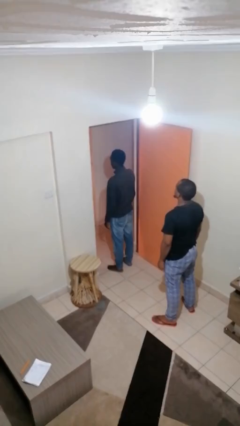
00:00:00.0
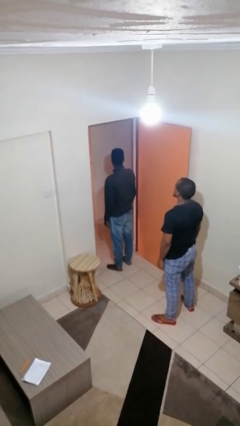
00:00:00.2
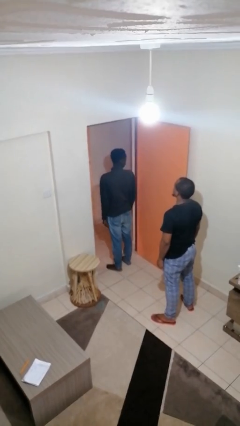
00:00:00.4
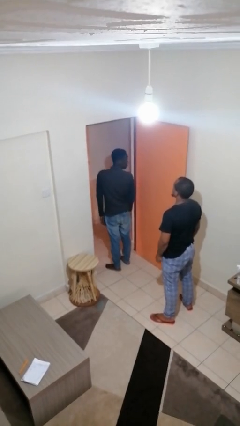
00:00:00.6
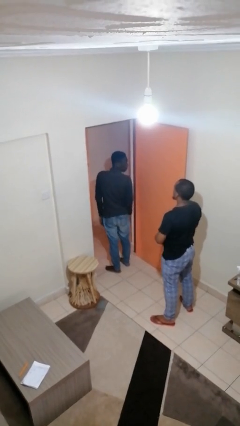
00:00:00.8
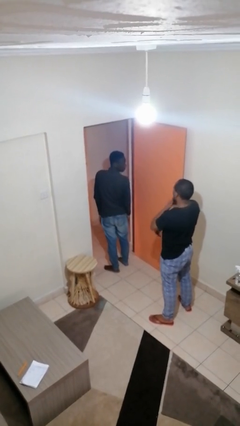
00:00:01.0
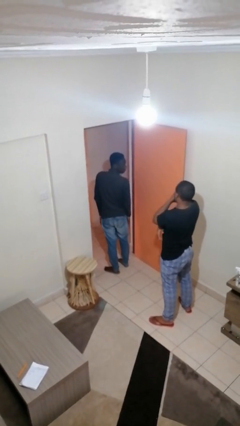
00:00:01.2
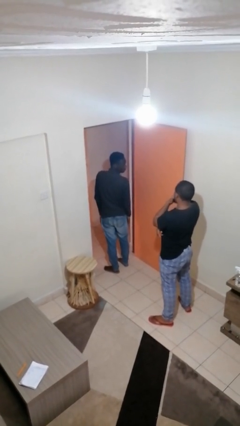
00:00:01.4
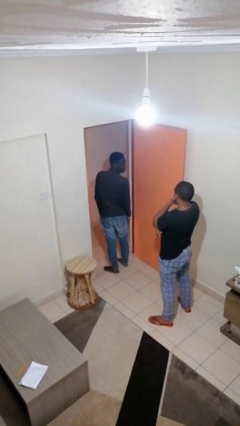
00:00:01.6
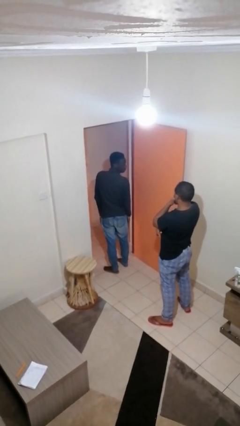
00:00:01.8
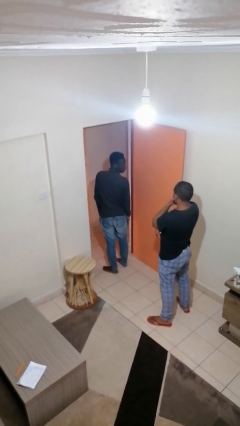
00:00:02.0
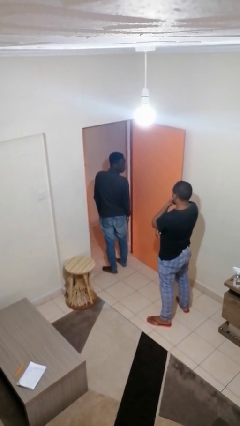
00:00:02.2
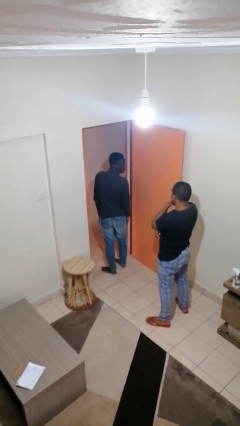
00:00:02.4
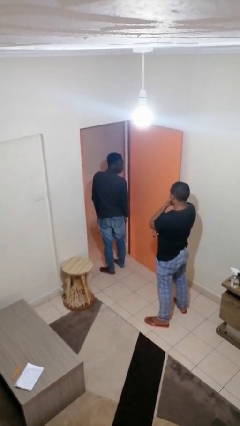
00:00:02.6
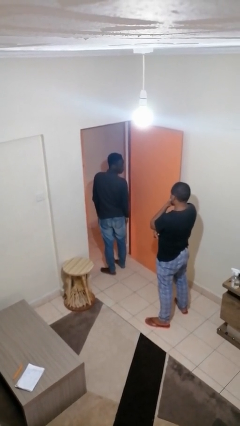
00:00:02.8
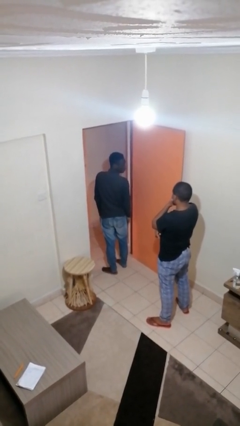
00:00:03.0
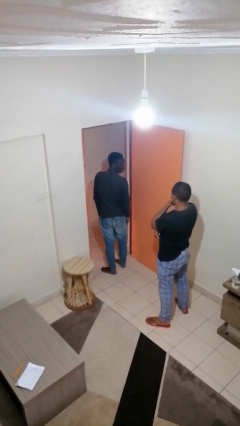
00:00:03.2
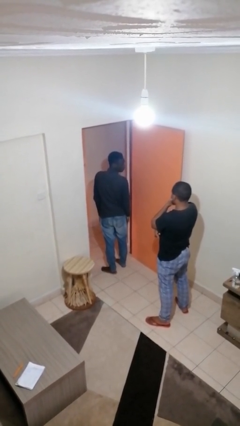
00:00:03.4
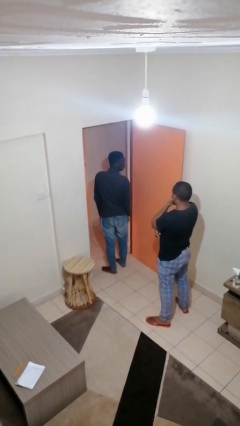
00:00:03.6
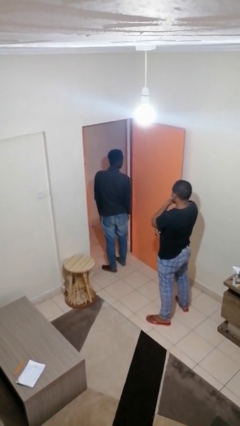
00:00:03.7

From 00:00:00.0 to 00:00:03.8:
person looks over shoulder

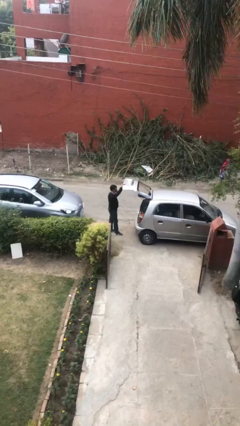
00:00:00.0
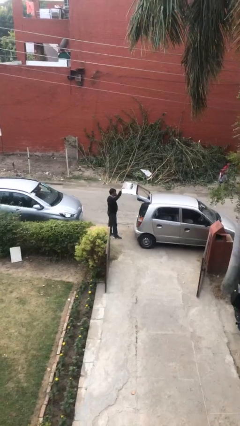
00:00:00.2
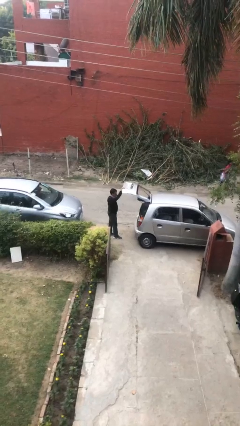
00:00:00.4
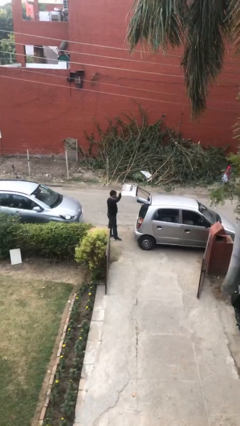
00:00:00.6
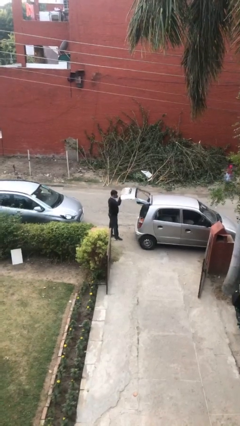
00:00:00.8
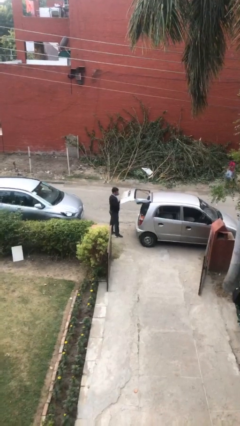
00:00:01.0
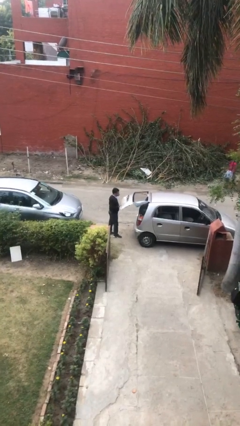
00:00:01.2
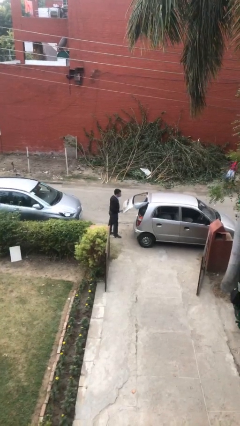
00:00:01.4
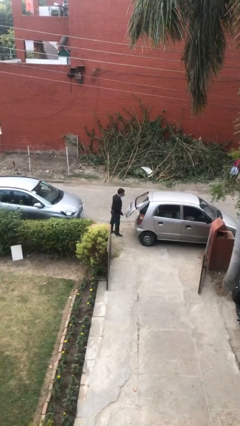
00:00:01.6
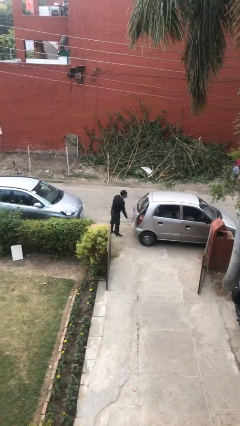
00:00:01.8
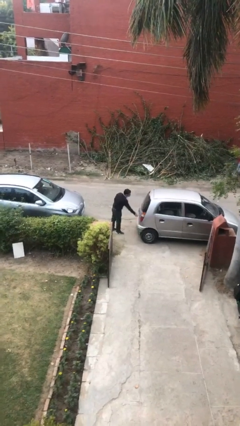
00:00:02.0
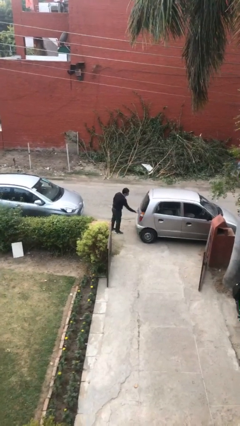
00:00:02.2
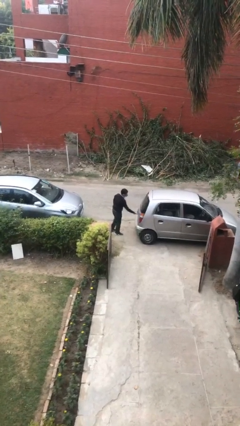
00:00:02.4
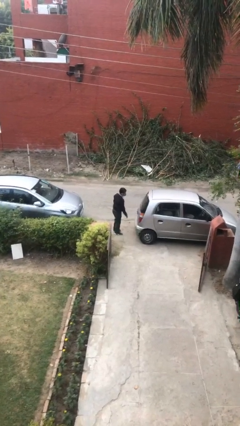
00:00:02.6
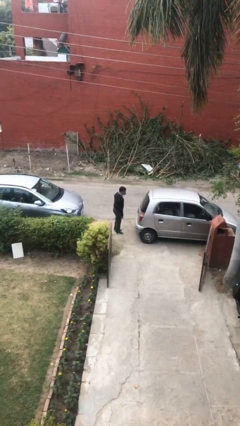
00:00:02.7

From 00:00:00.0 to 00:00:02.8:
person closes car trunk

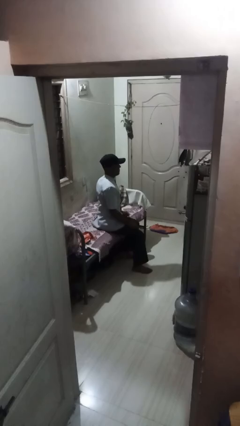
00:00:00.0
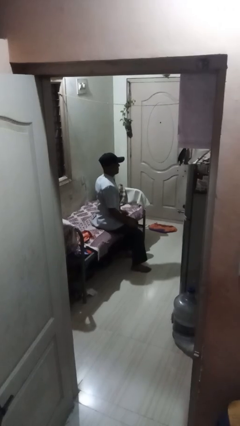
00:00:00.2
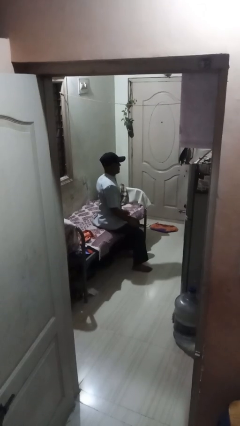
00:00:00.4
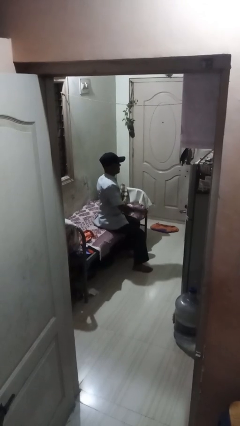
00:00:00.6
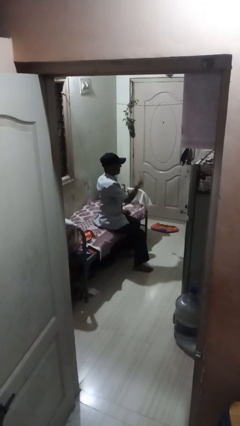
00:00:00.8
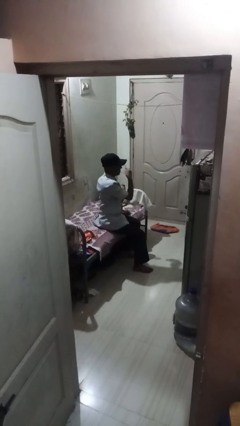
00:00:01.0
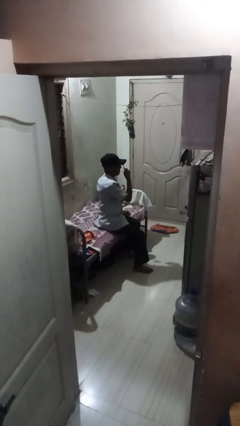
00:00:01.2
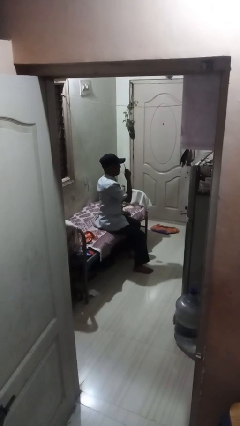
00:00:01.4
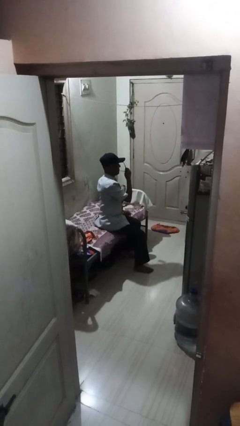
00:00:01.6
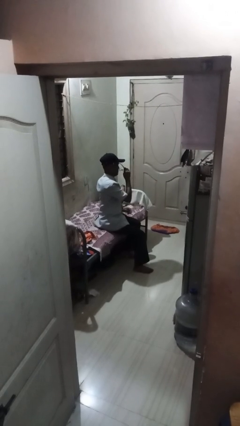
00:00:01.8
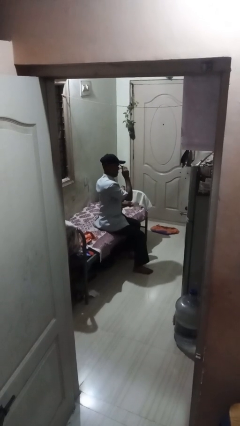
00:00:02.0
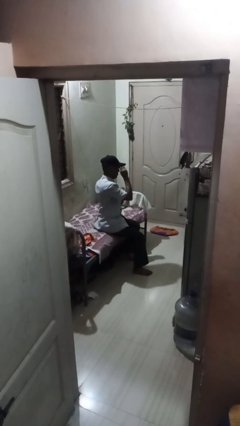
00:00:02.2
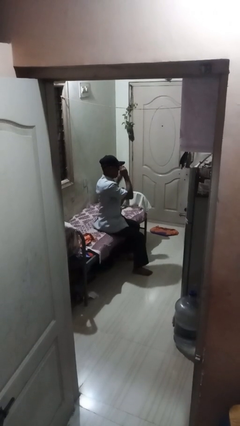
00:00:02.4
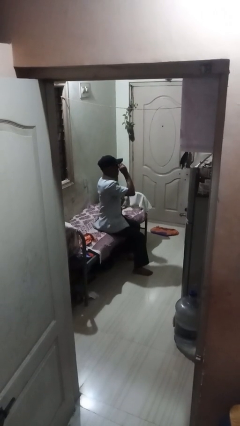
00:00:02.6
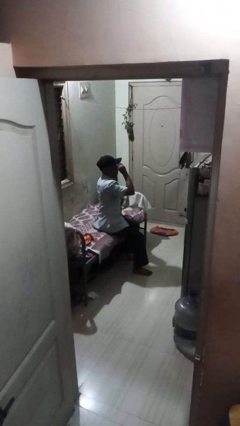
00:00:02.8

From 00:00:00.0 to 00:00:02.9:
person puts on glasses

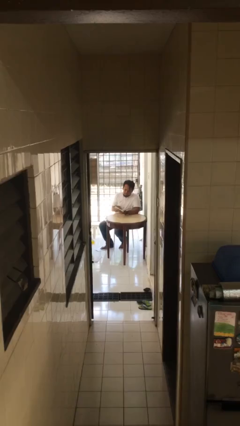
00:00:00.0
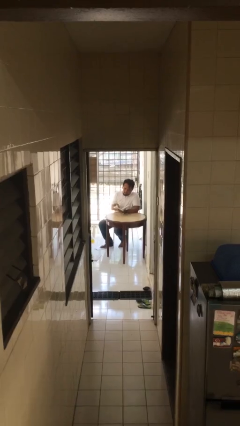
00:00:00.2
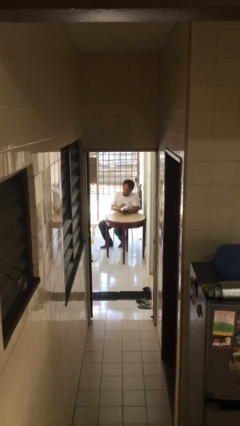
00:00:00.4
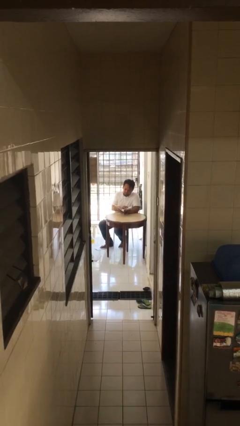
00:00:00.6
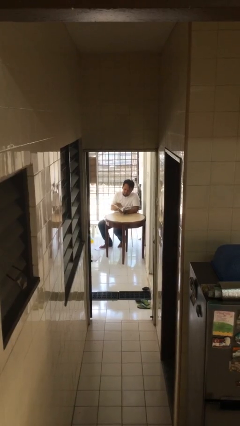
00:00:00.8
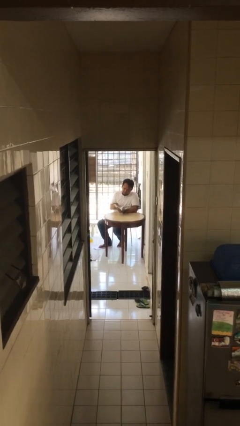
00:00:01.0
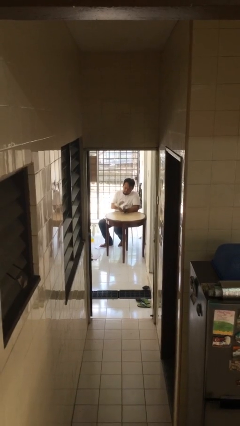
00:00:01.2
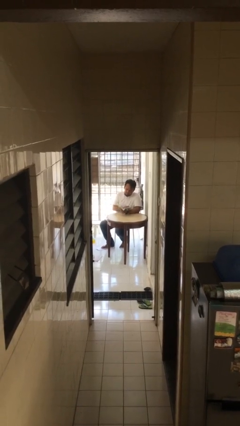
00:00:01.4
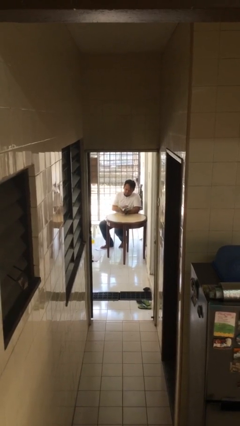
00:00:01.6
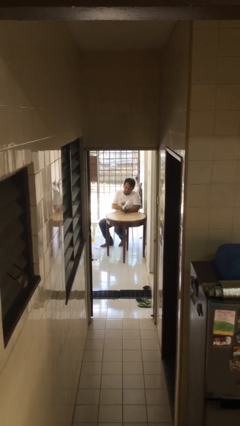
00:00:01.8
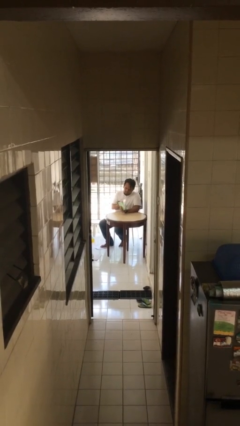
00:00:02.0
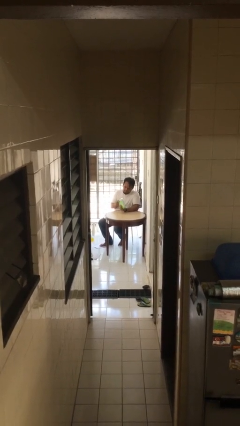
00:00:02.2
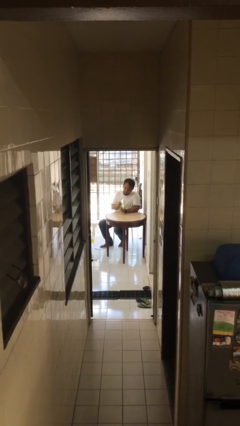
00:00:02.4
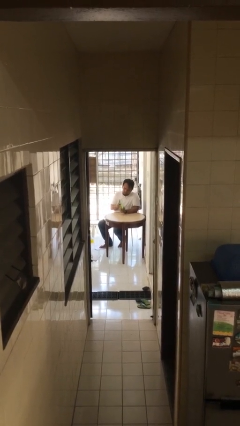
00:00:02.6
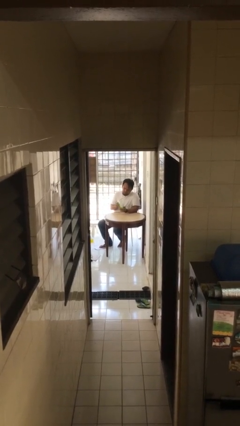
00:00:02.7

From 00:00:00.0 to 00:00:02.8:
person reads document

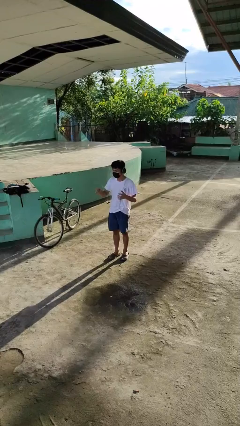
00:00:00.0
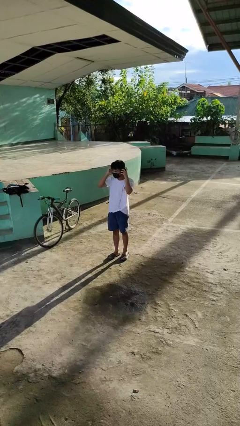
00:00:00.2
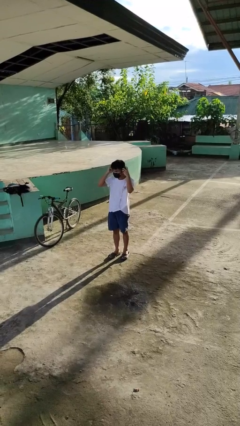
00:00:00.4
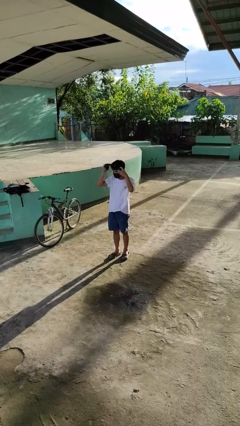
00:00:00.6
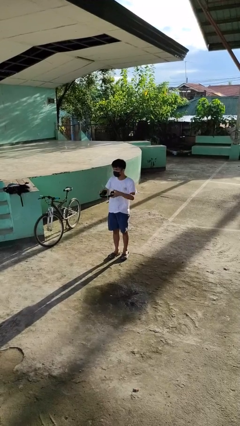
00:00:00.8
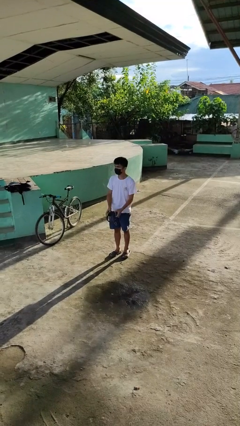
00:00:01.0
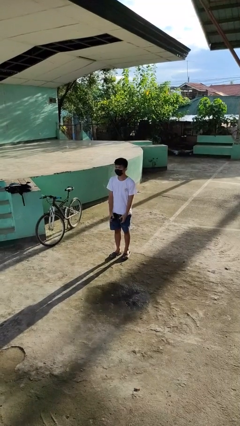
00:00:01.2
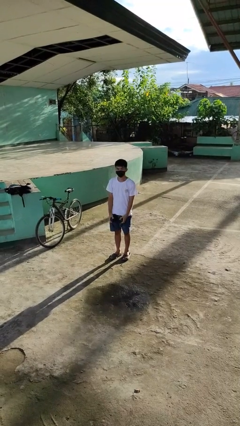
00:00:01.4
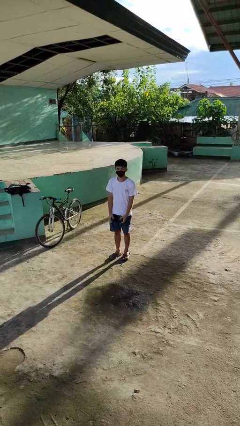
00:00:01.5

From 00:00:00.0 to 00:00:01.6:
person takes off headphones

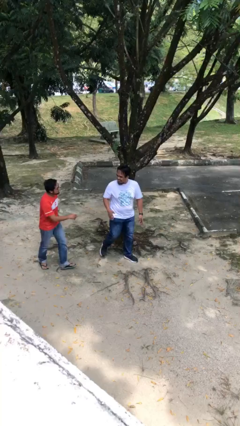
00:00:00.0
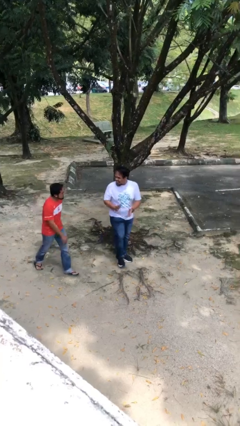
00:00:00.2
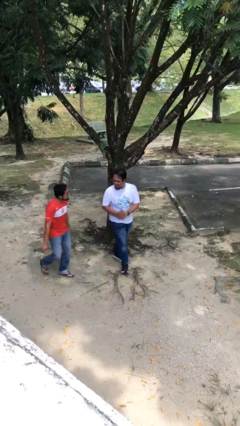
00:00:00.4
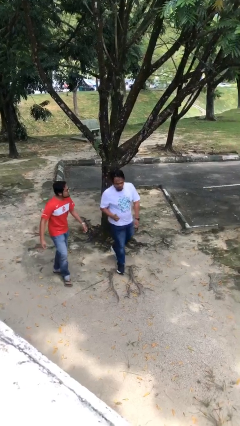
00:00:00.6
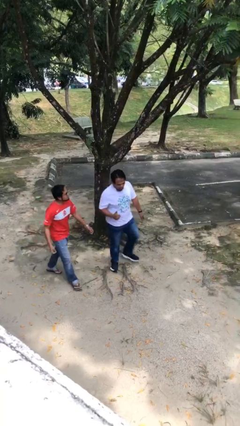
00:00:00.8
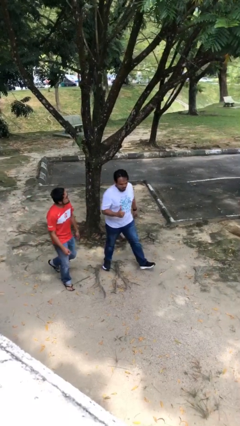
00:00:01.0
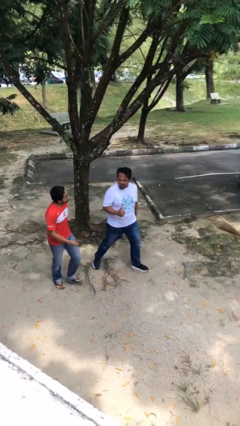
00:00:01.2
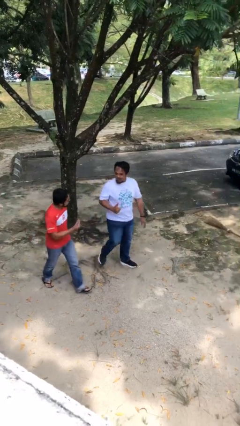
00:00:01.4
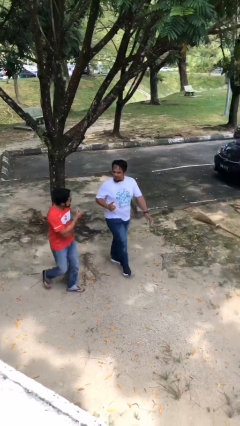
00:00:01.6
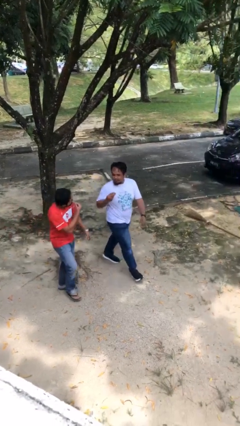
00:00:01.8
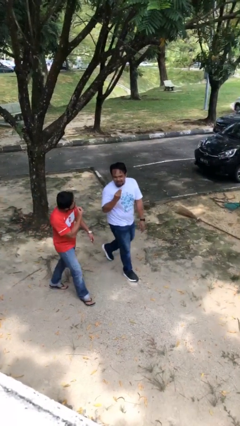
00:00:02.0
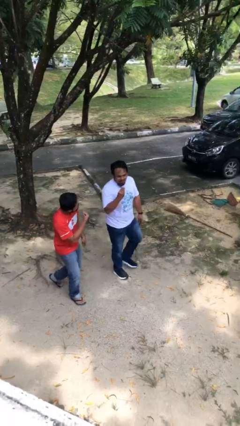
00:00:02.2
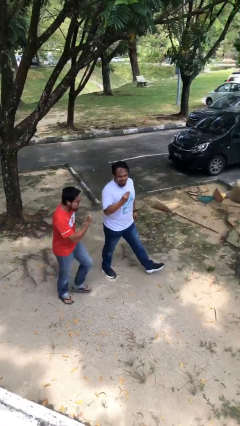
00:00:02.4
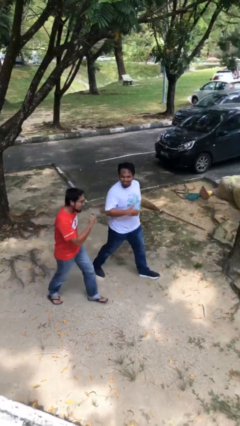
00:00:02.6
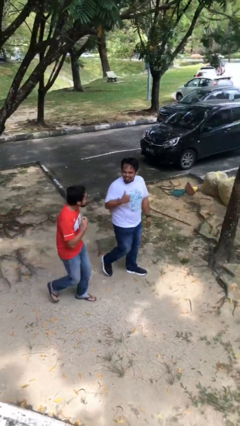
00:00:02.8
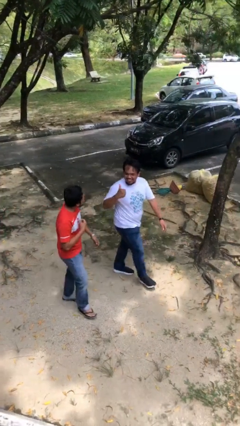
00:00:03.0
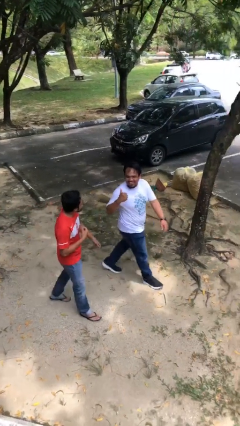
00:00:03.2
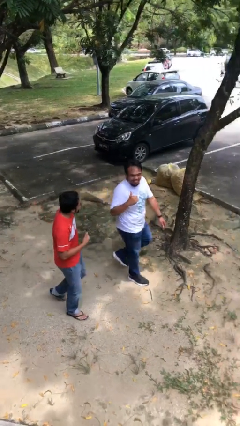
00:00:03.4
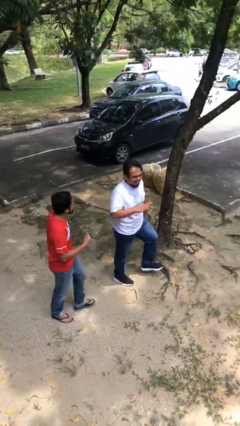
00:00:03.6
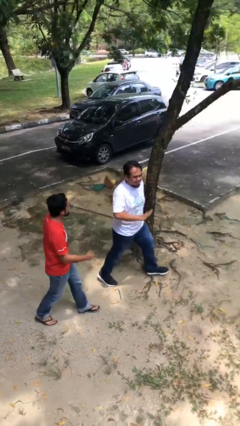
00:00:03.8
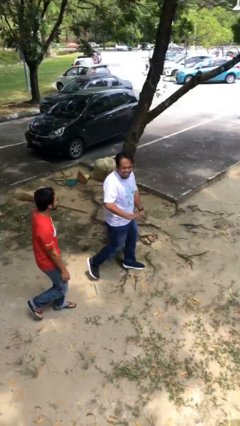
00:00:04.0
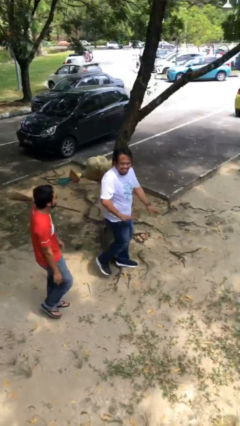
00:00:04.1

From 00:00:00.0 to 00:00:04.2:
person talks to person
